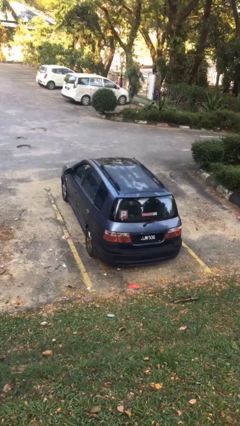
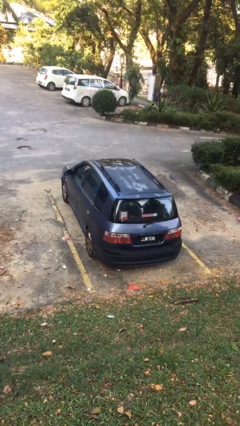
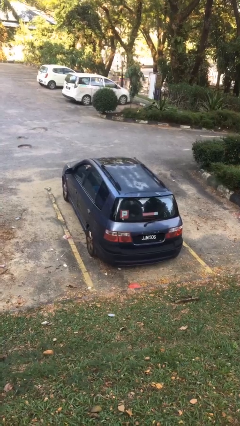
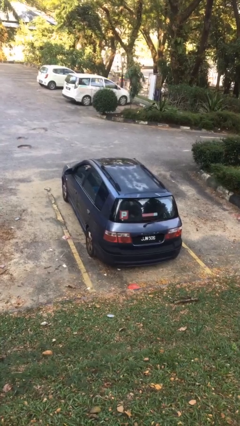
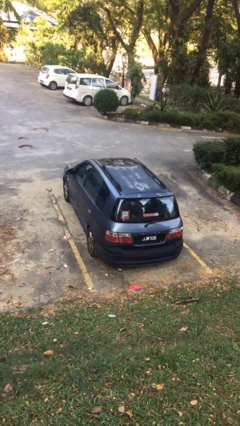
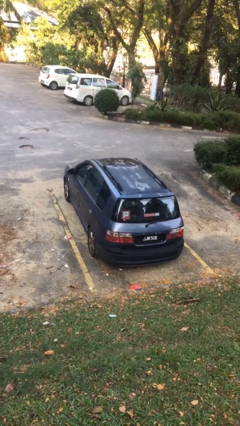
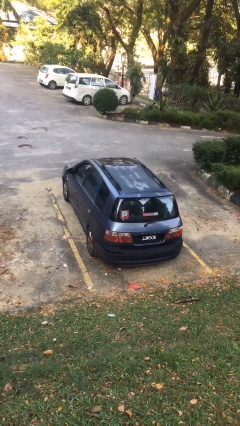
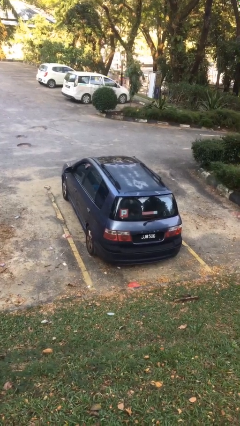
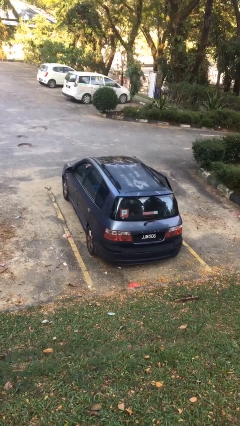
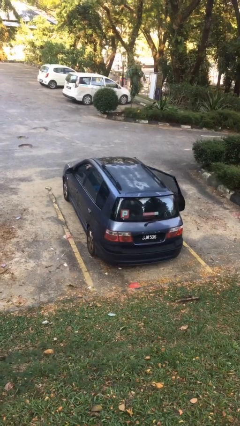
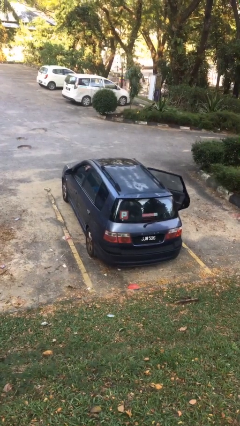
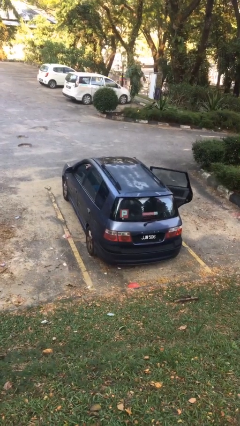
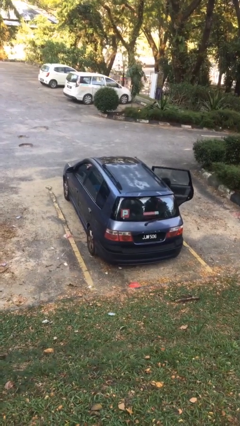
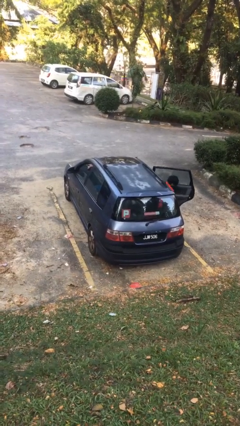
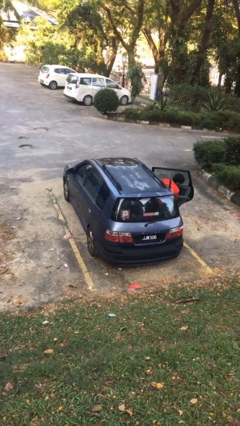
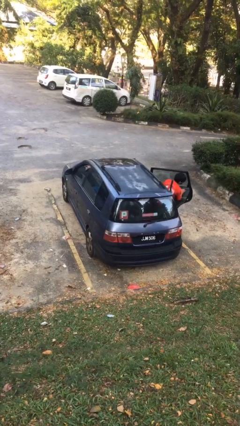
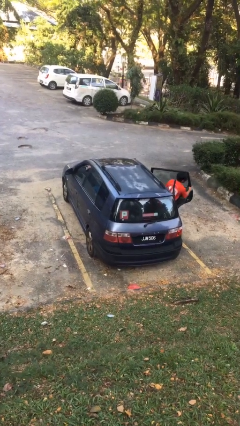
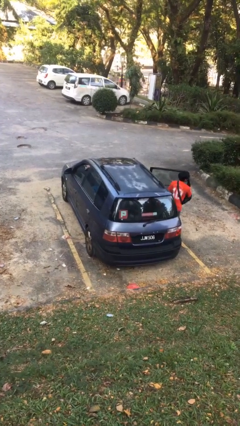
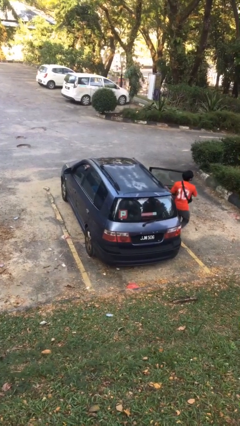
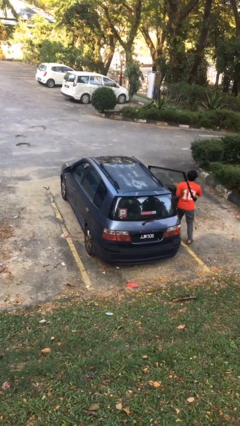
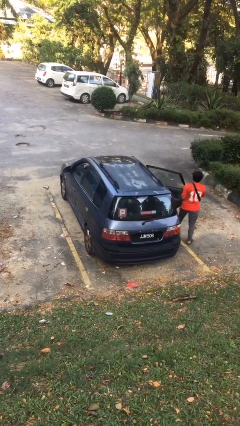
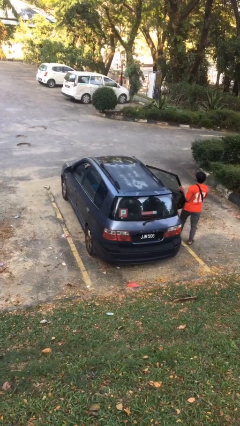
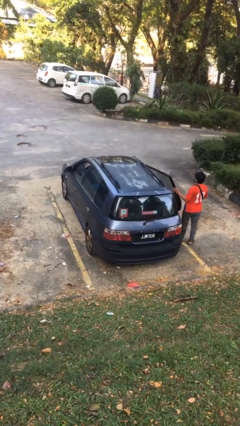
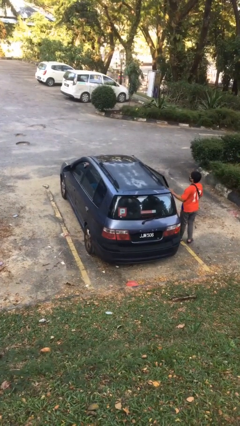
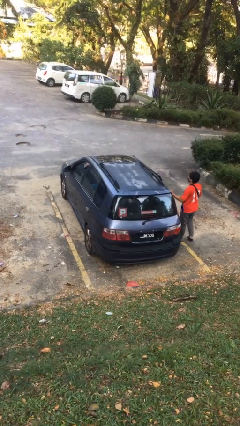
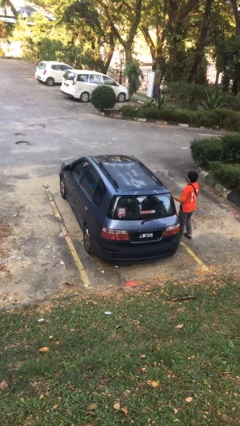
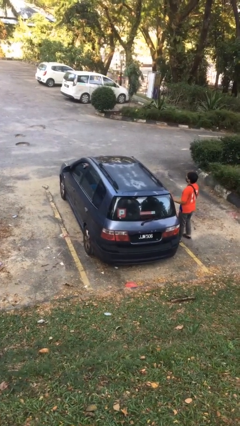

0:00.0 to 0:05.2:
car drops off person

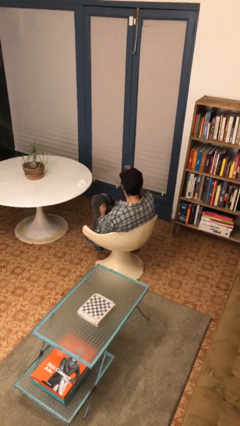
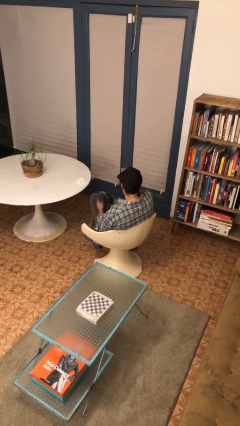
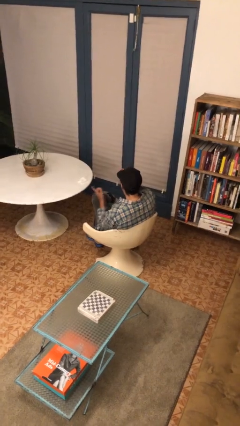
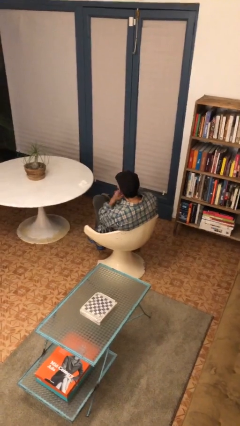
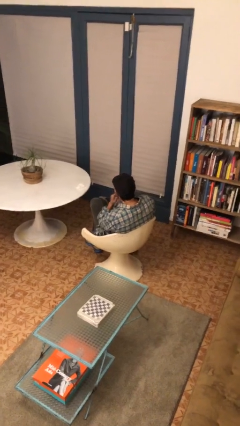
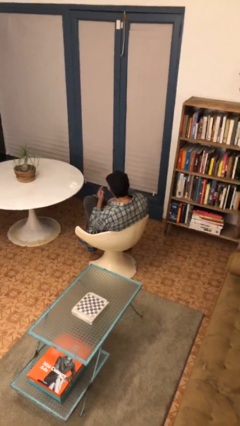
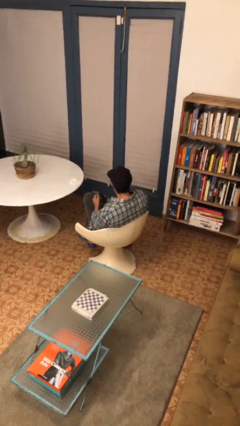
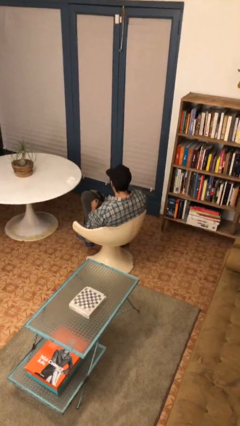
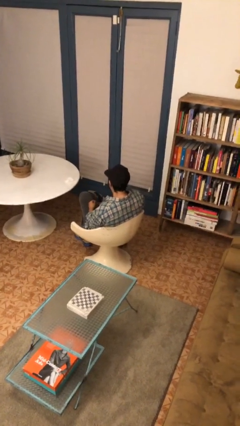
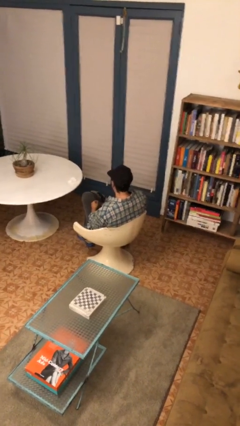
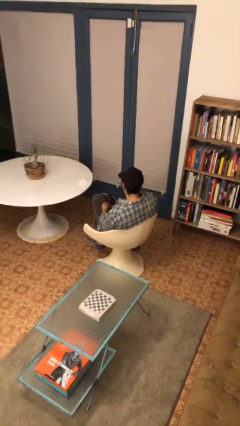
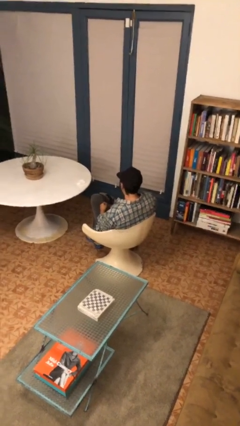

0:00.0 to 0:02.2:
person gestures listen closely

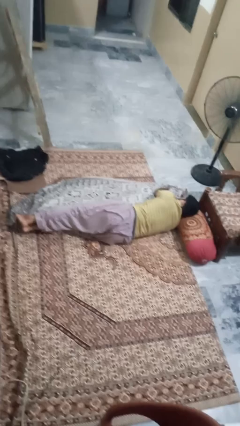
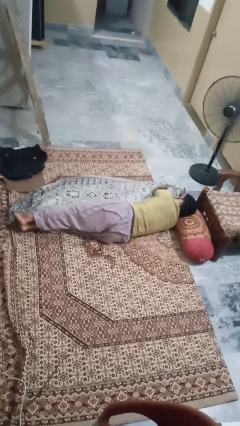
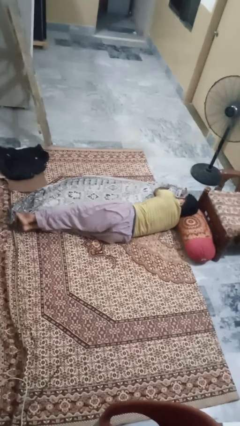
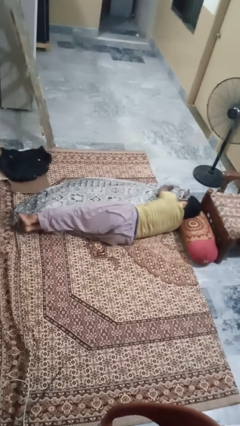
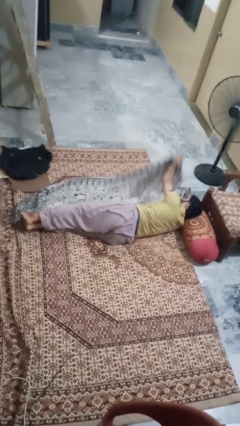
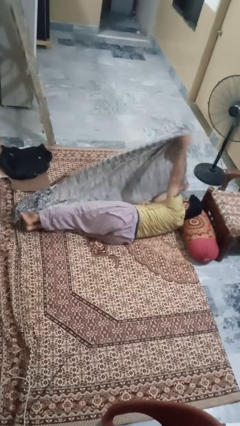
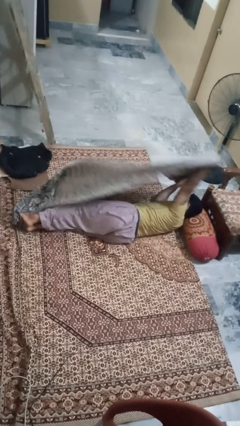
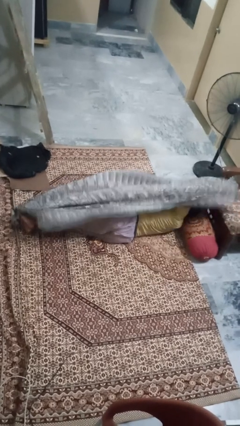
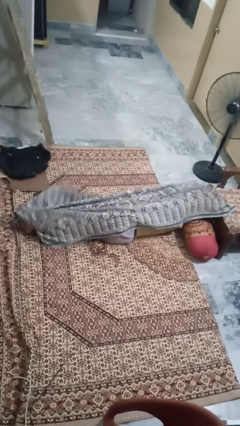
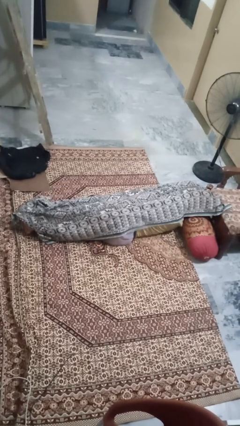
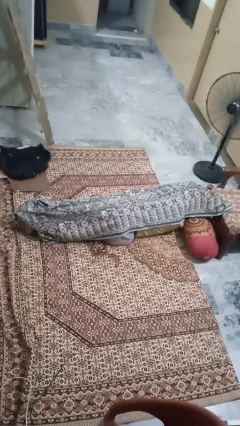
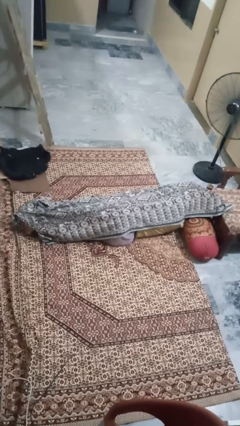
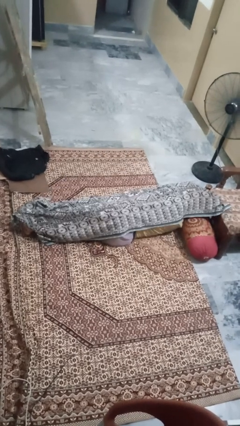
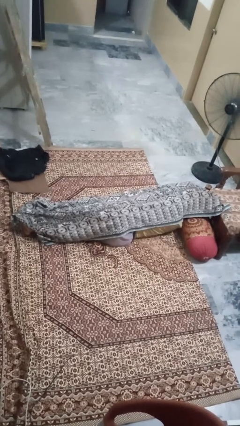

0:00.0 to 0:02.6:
person covers with blanket

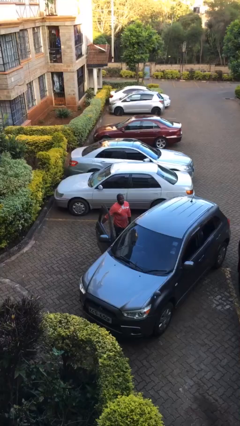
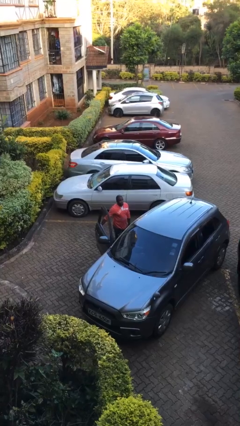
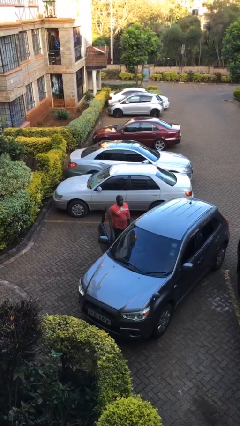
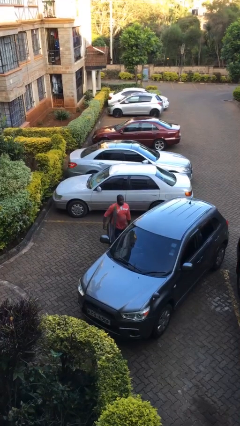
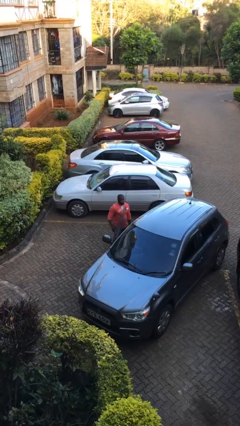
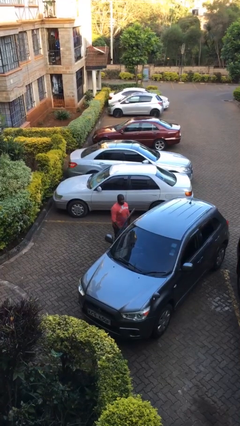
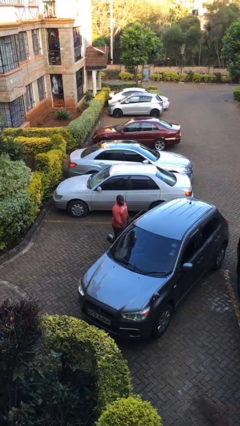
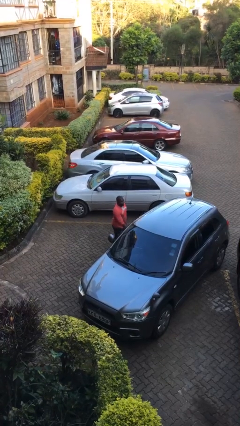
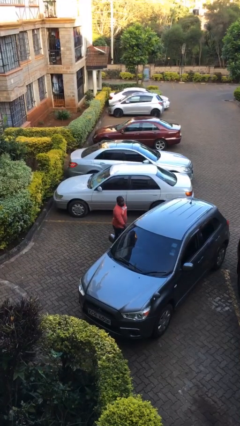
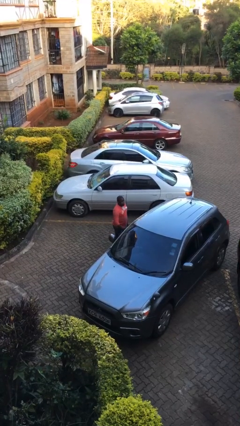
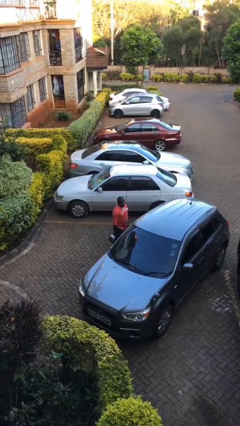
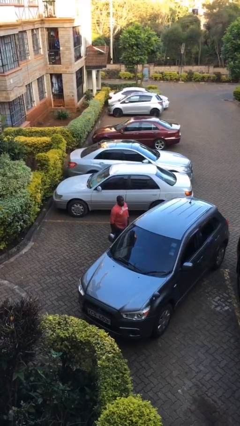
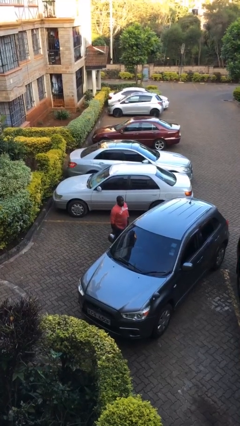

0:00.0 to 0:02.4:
person closes car door

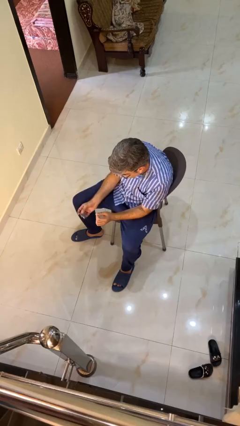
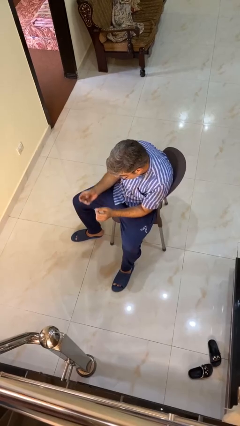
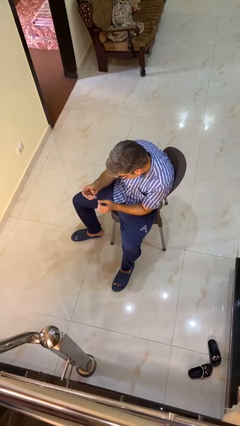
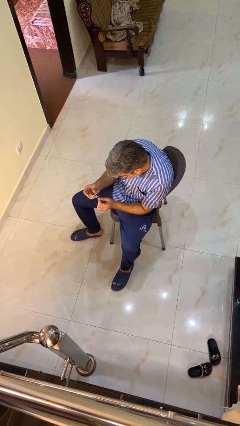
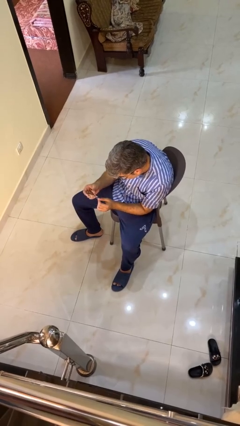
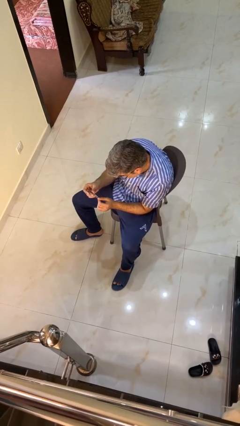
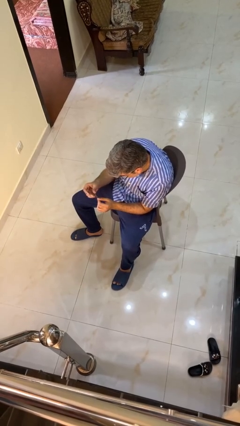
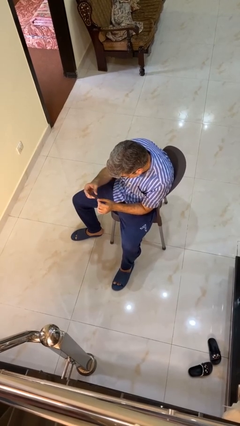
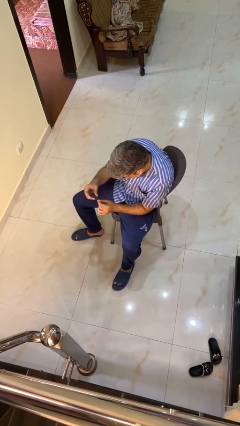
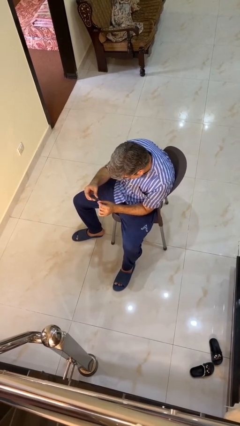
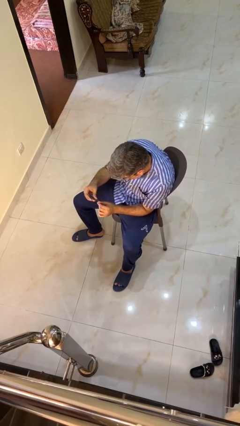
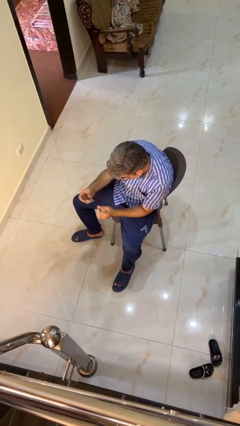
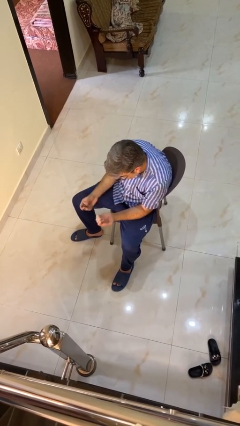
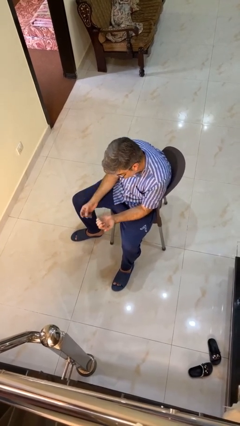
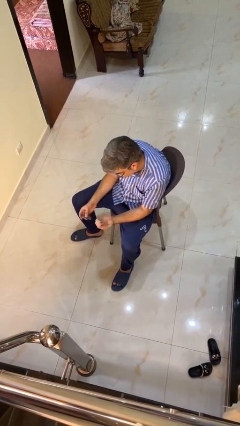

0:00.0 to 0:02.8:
person clips fingernails

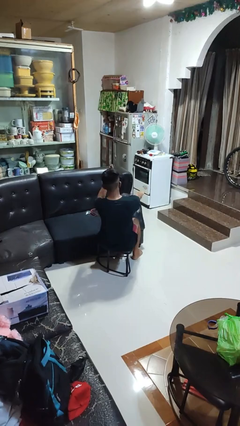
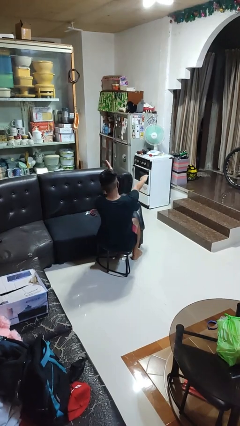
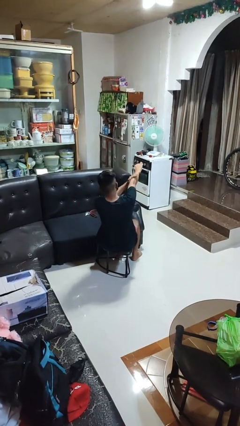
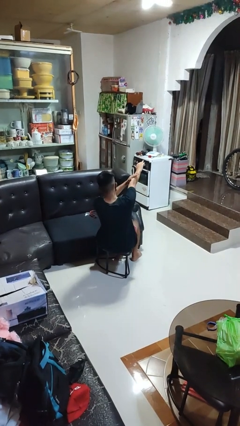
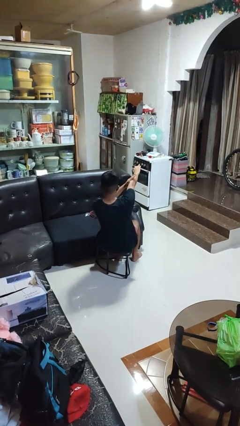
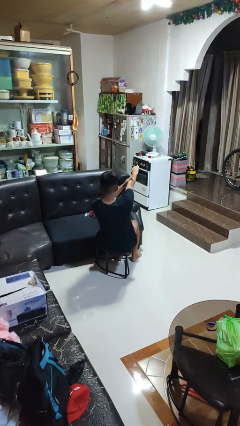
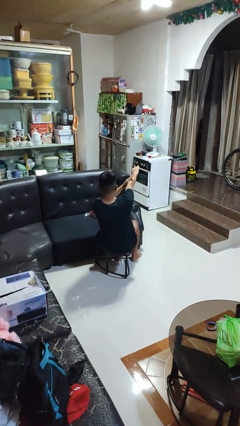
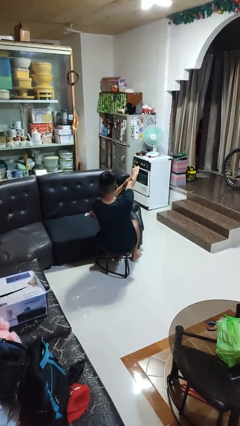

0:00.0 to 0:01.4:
person swats bug

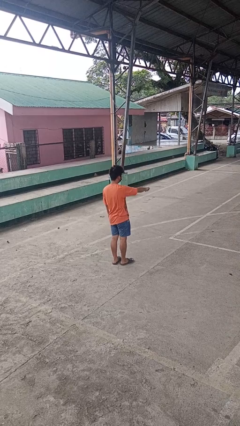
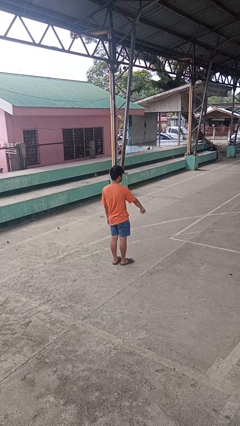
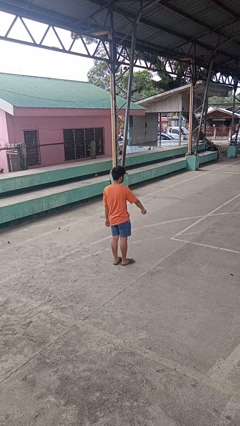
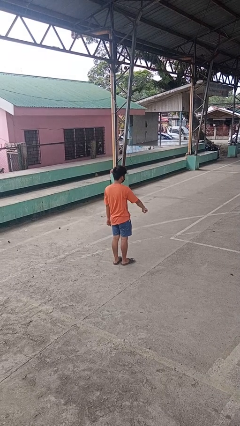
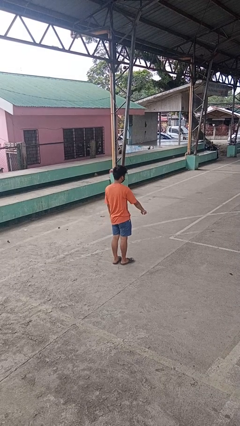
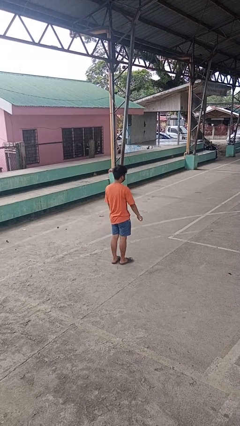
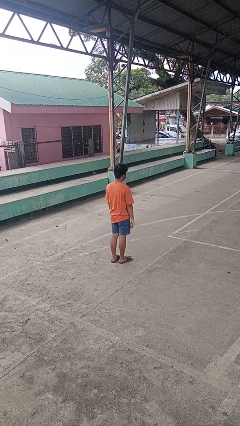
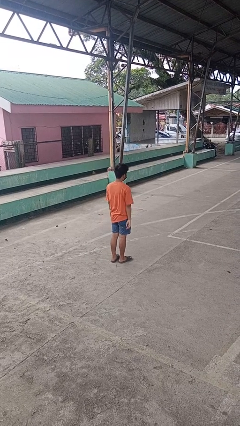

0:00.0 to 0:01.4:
person gestures swipe down
